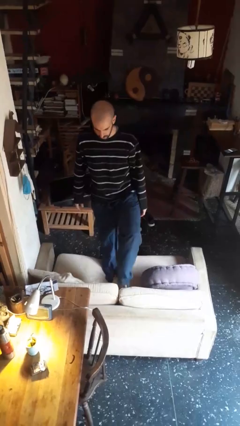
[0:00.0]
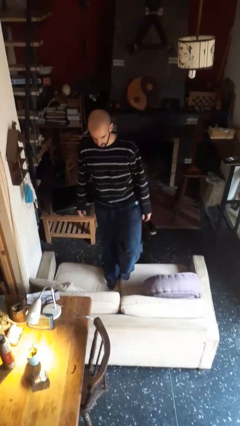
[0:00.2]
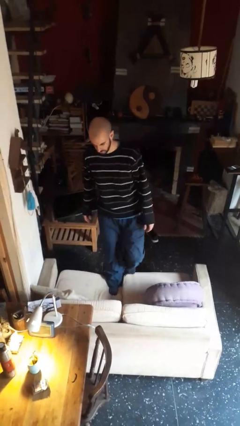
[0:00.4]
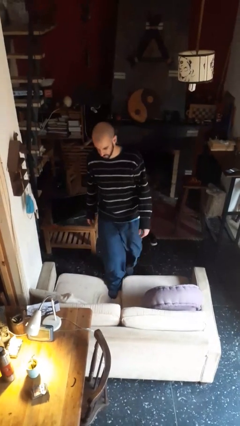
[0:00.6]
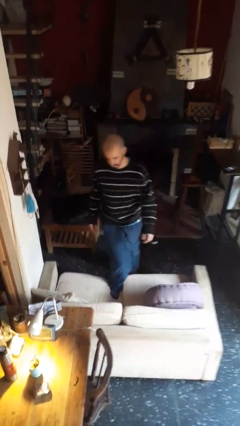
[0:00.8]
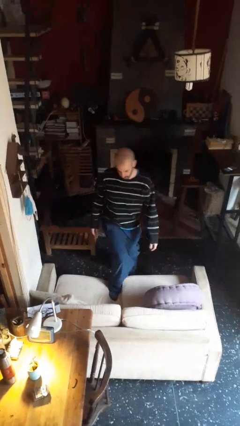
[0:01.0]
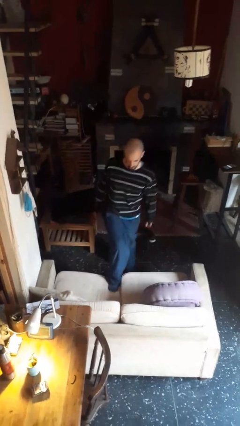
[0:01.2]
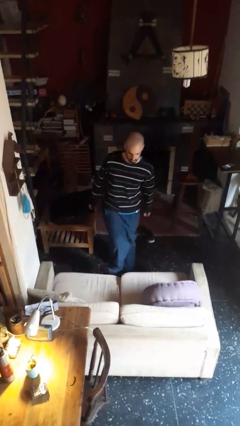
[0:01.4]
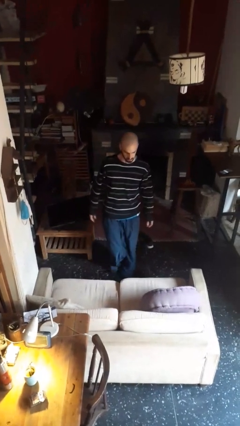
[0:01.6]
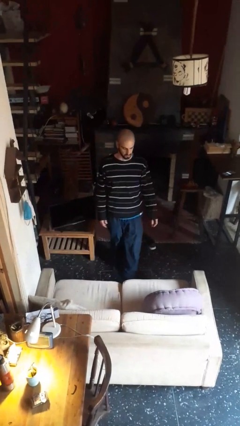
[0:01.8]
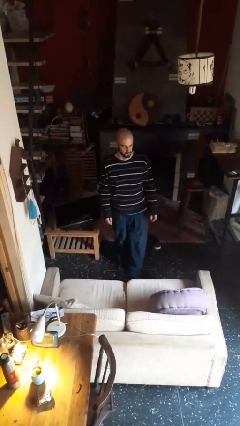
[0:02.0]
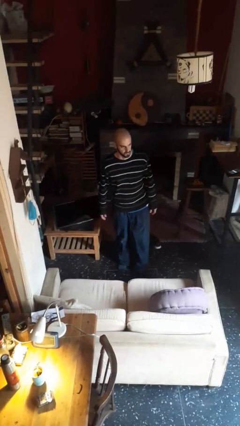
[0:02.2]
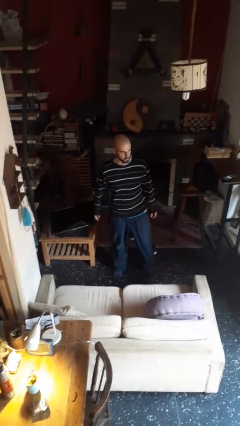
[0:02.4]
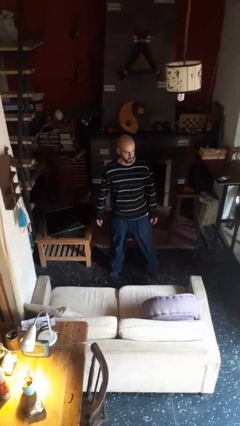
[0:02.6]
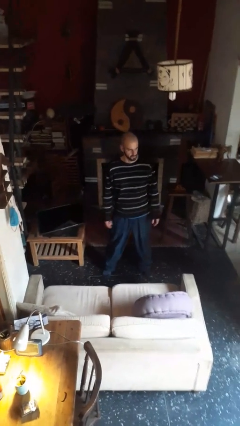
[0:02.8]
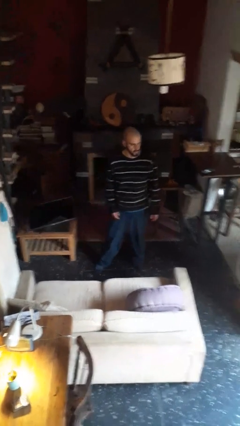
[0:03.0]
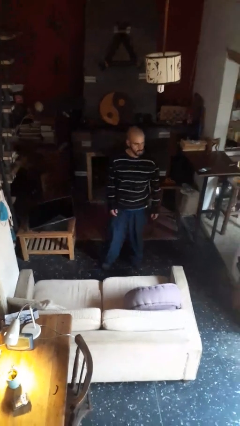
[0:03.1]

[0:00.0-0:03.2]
person climbs off couch

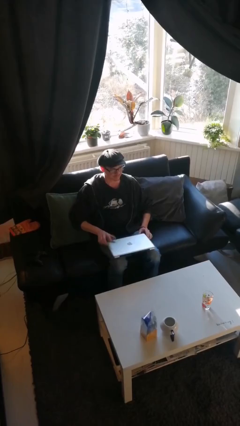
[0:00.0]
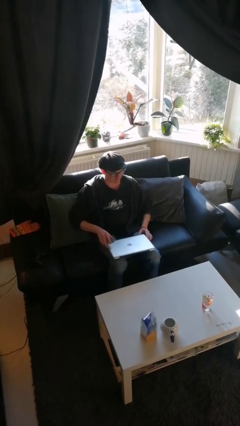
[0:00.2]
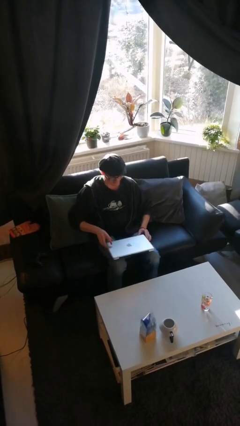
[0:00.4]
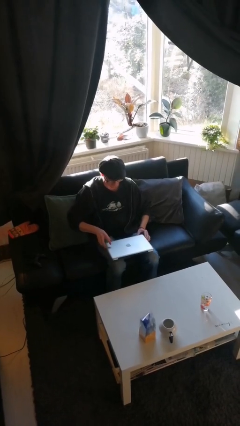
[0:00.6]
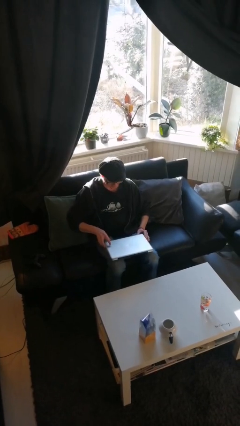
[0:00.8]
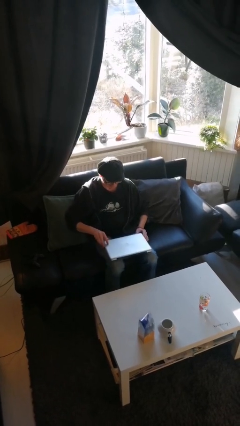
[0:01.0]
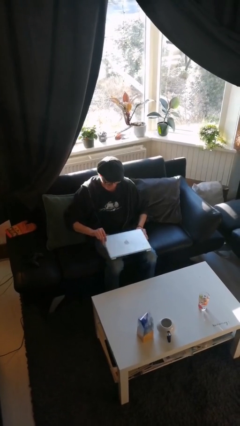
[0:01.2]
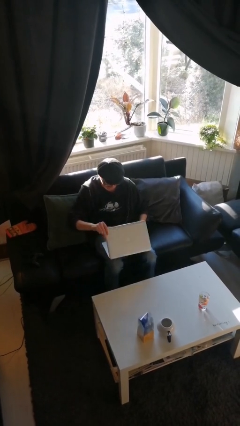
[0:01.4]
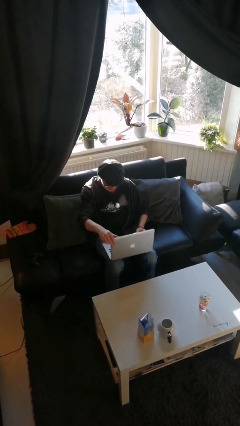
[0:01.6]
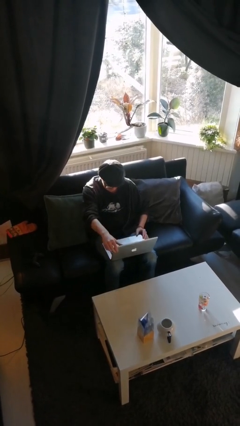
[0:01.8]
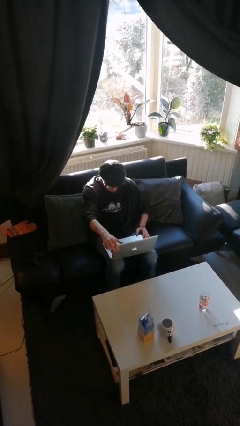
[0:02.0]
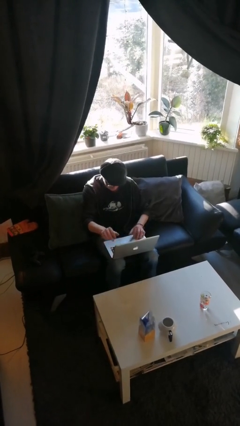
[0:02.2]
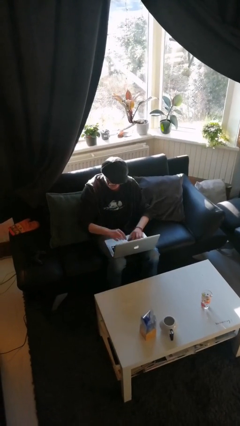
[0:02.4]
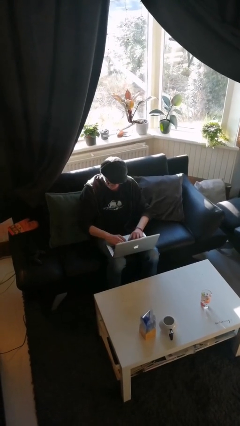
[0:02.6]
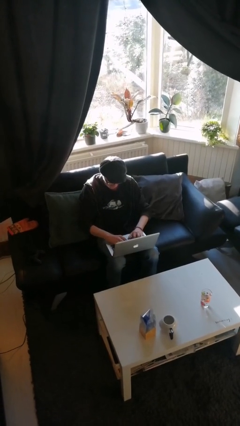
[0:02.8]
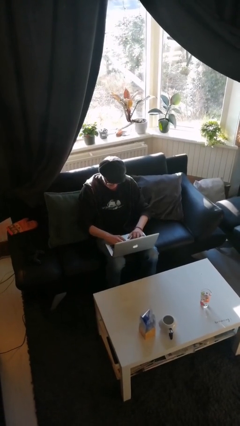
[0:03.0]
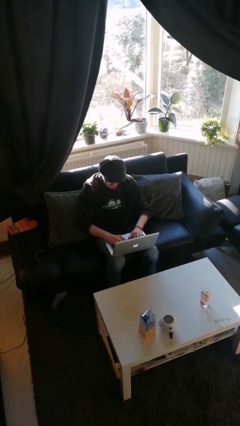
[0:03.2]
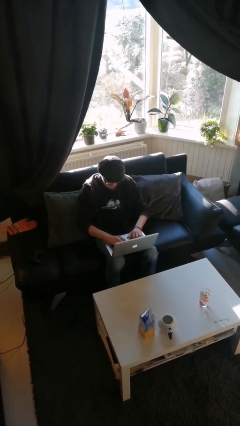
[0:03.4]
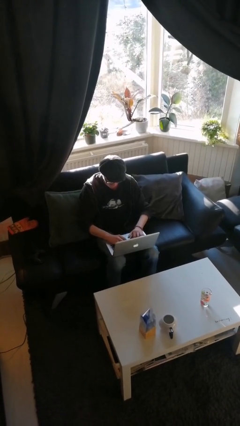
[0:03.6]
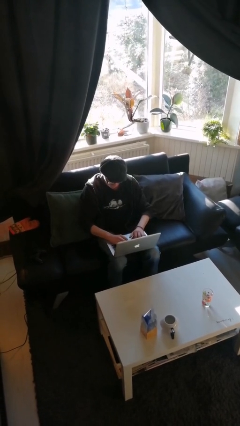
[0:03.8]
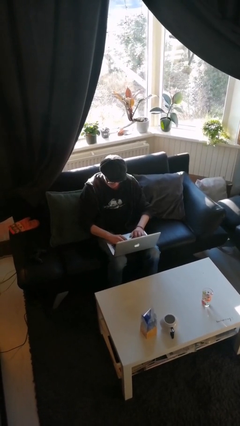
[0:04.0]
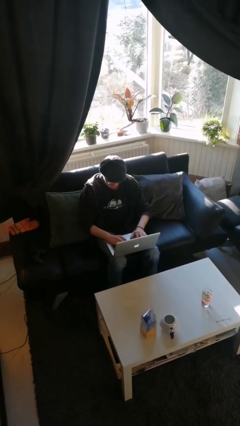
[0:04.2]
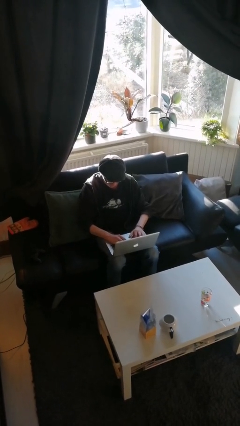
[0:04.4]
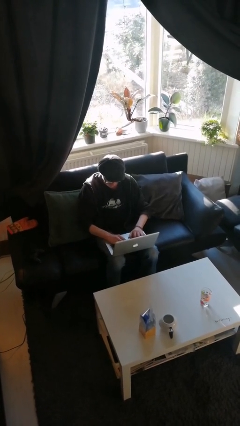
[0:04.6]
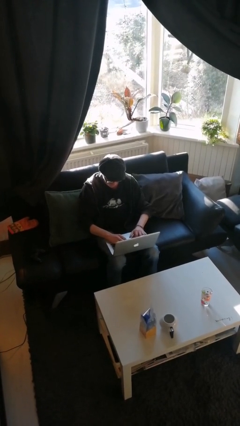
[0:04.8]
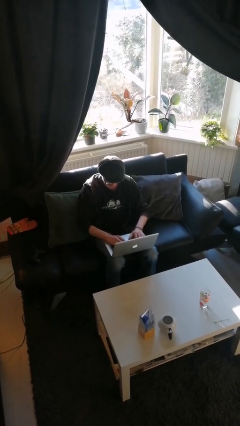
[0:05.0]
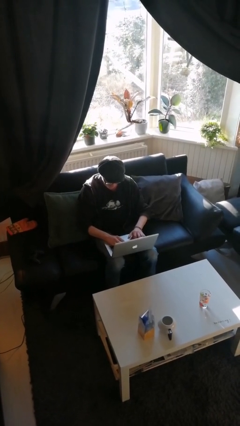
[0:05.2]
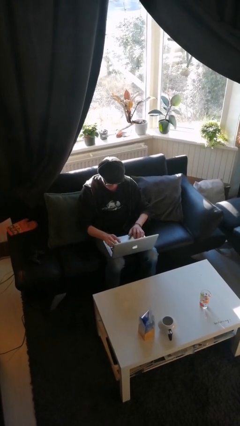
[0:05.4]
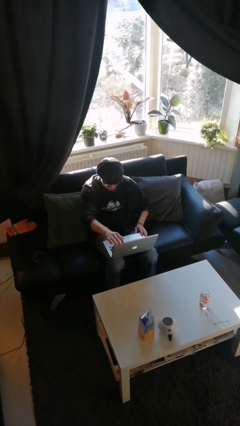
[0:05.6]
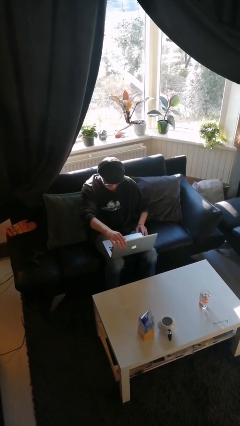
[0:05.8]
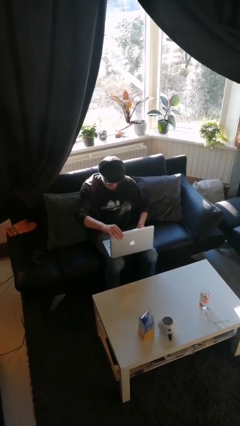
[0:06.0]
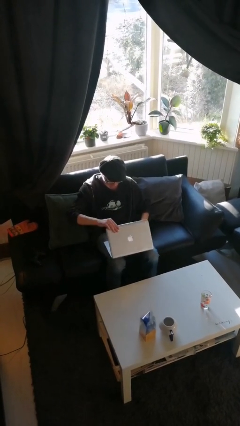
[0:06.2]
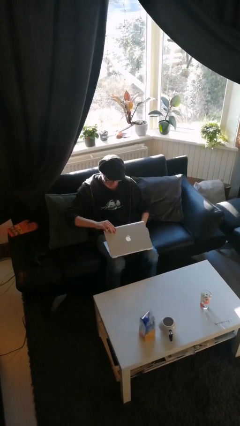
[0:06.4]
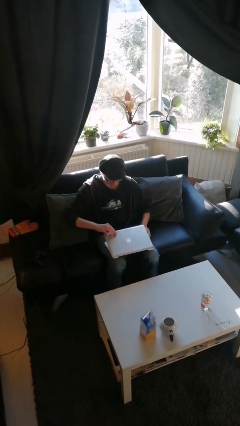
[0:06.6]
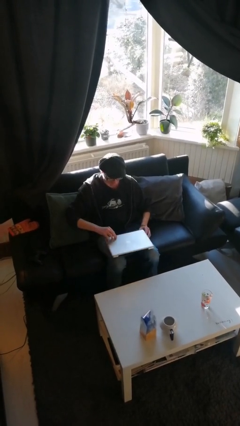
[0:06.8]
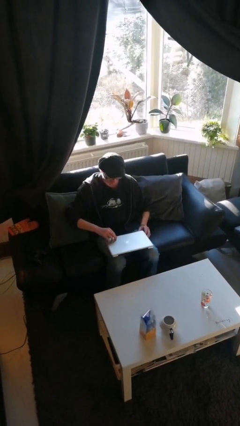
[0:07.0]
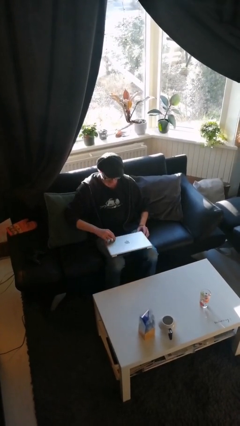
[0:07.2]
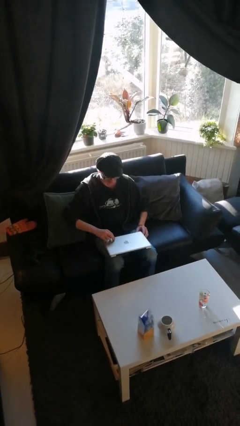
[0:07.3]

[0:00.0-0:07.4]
person interacts with laptop

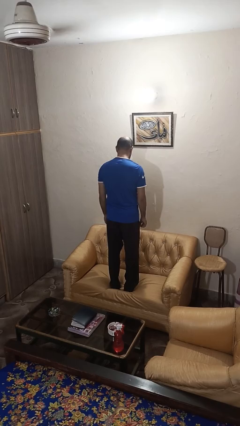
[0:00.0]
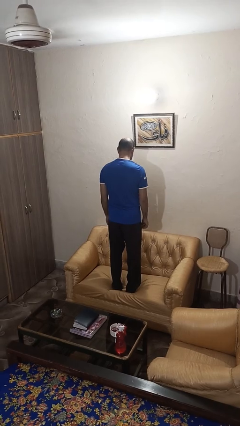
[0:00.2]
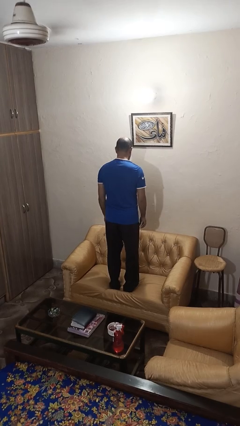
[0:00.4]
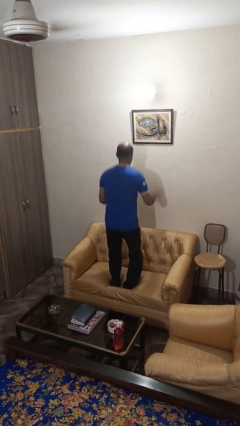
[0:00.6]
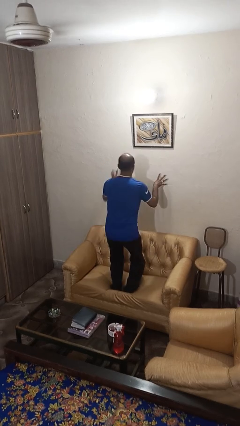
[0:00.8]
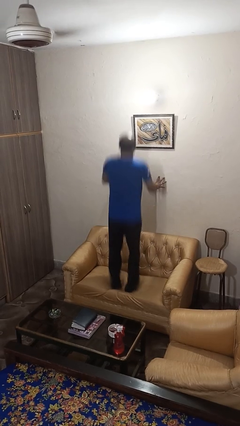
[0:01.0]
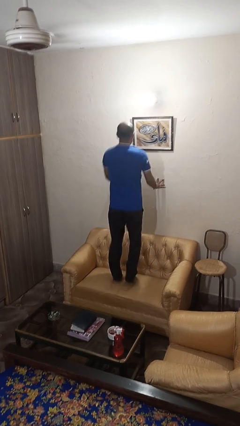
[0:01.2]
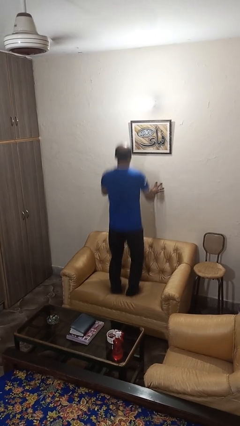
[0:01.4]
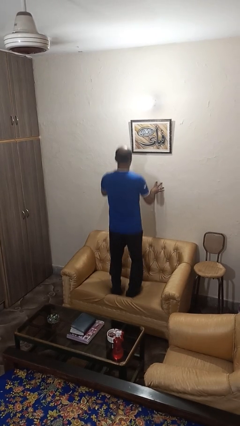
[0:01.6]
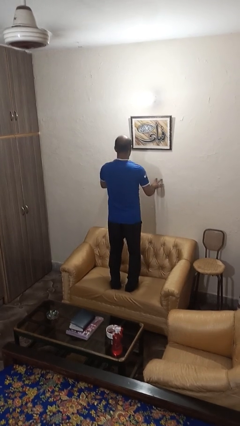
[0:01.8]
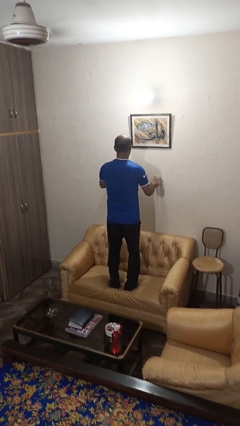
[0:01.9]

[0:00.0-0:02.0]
person jumps on couch

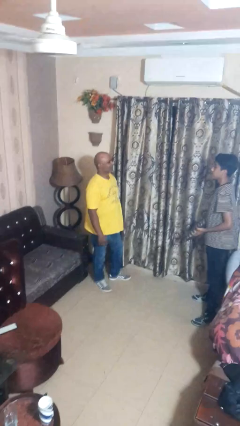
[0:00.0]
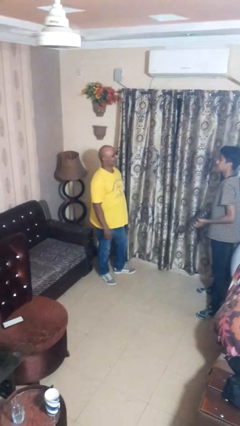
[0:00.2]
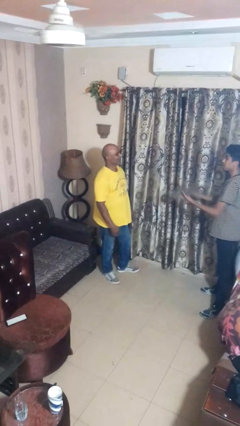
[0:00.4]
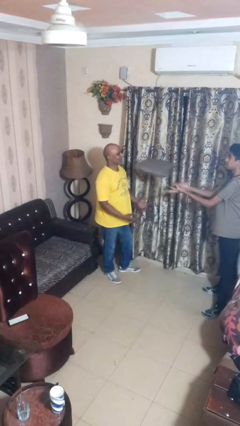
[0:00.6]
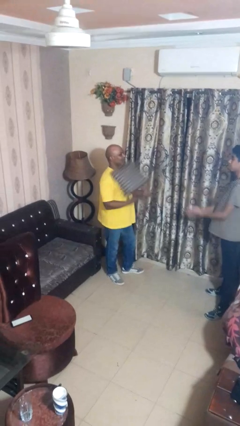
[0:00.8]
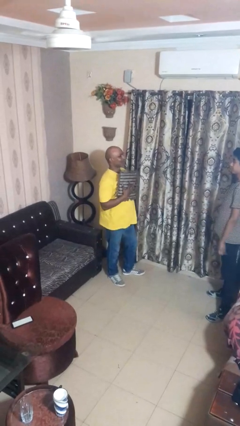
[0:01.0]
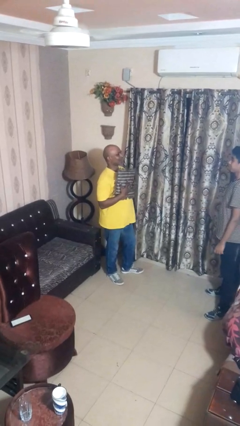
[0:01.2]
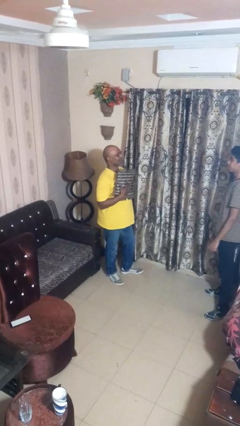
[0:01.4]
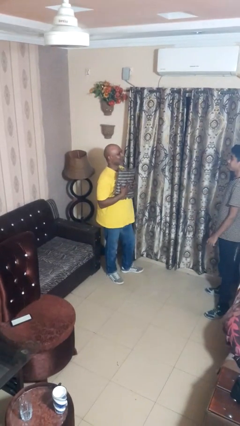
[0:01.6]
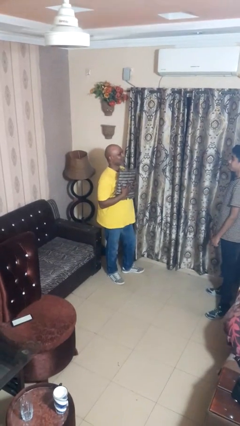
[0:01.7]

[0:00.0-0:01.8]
person catches object from person

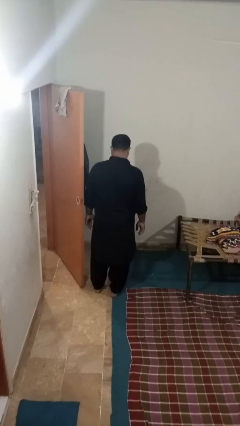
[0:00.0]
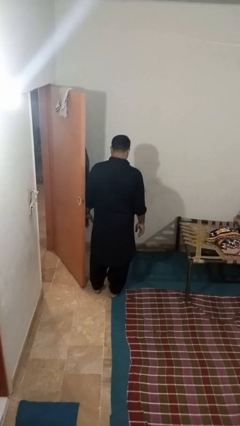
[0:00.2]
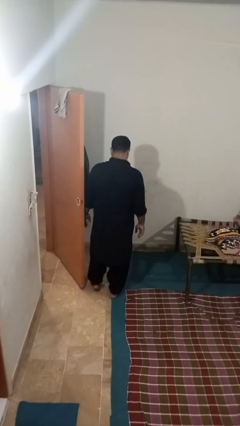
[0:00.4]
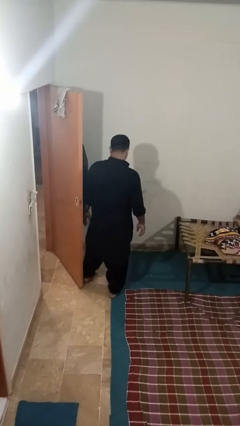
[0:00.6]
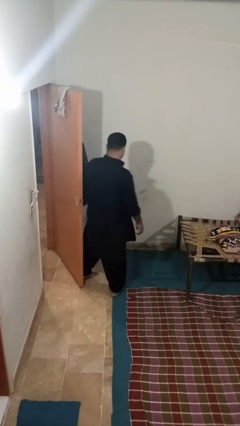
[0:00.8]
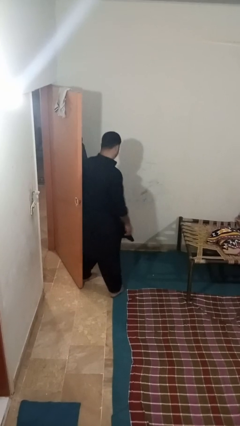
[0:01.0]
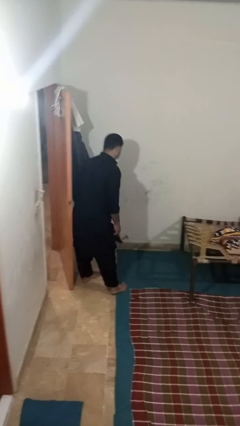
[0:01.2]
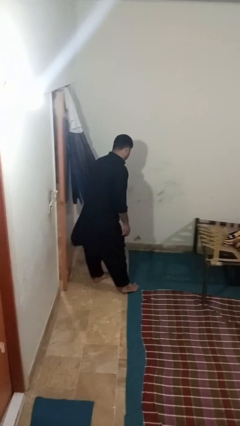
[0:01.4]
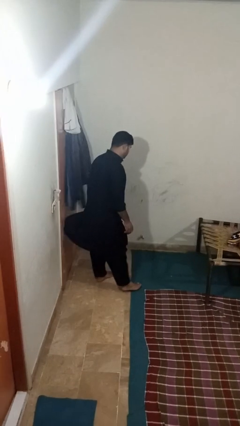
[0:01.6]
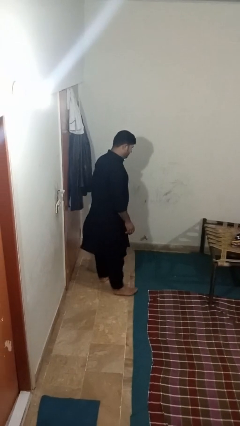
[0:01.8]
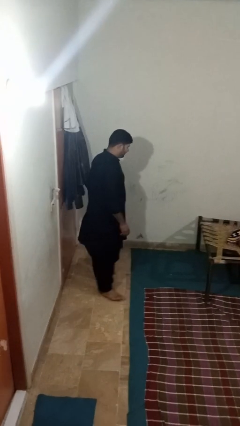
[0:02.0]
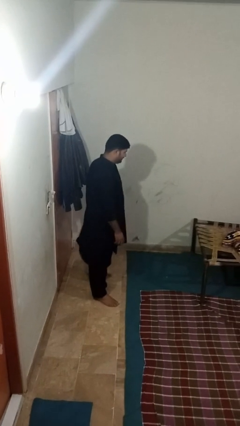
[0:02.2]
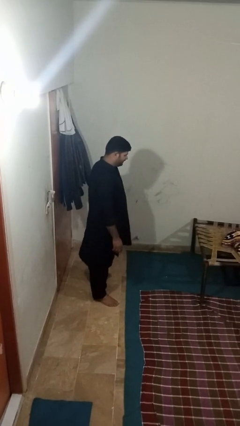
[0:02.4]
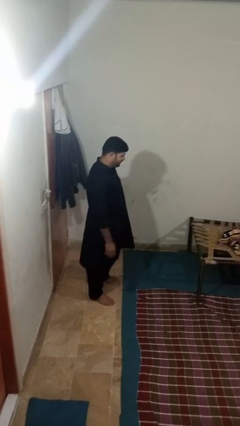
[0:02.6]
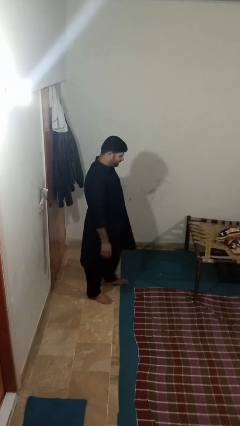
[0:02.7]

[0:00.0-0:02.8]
person closes door with hip
